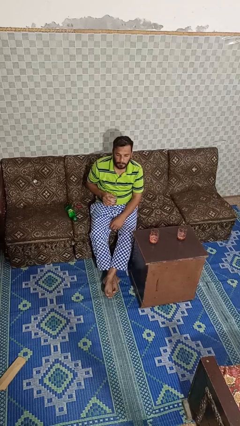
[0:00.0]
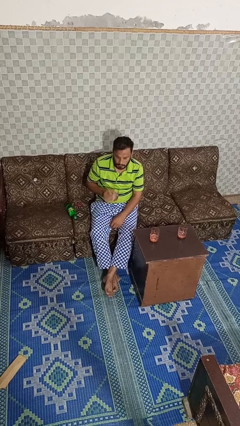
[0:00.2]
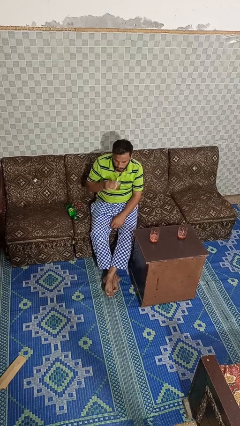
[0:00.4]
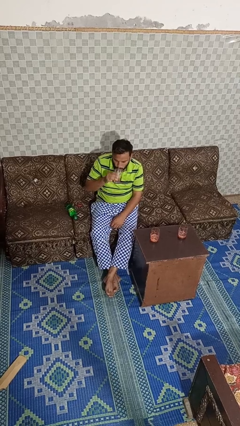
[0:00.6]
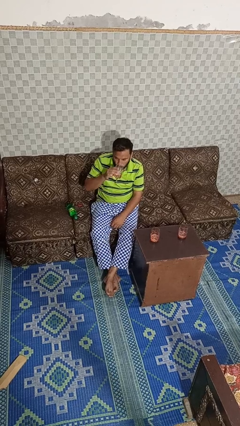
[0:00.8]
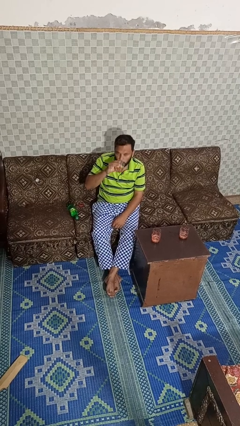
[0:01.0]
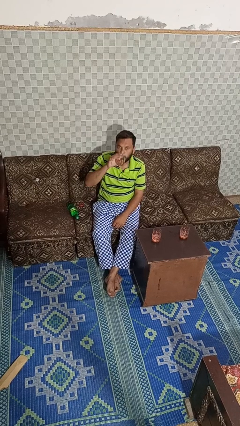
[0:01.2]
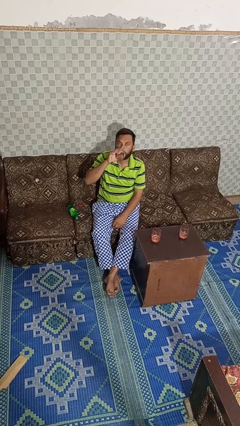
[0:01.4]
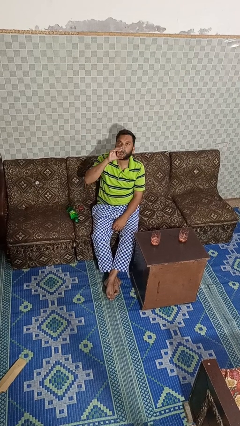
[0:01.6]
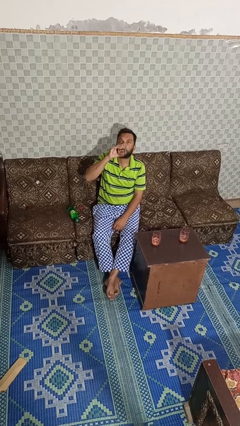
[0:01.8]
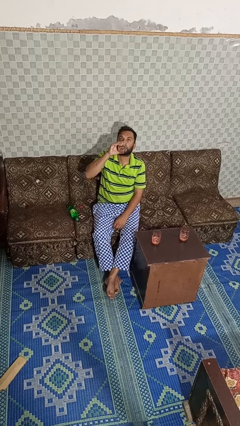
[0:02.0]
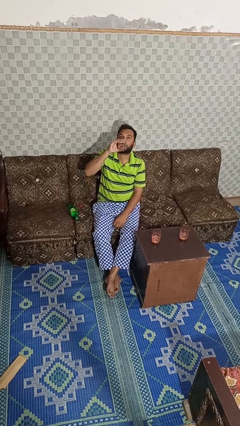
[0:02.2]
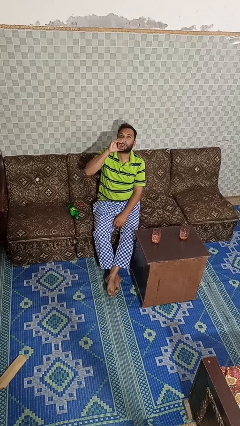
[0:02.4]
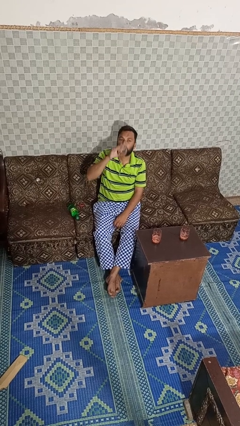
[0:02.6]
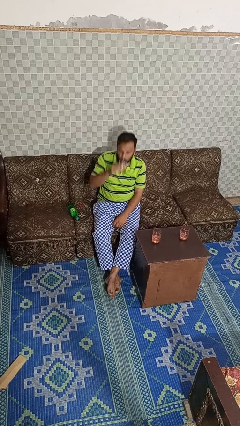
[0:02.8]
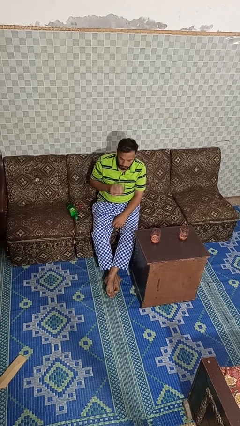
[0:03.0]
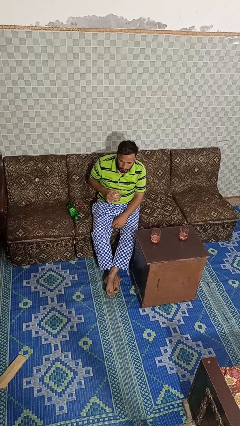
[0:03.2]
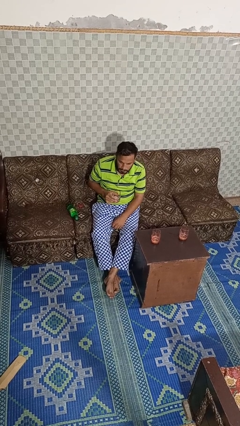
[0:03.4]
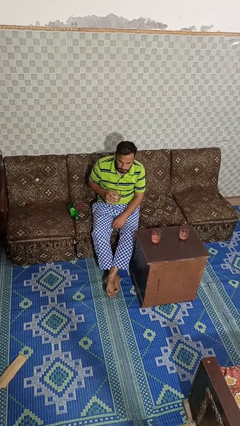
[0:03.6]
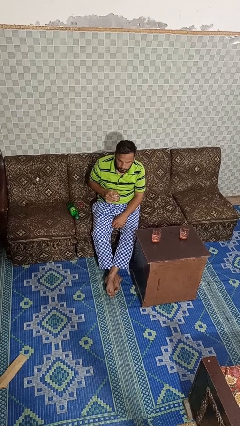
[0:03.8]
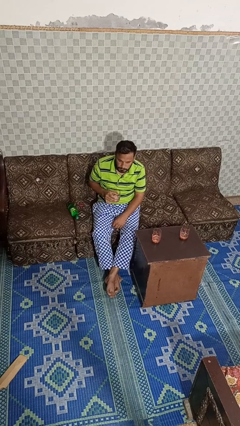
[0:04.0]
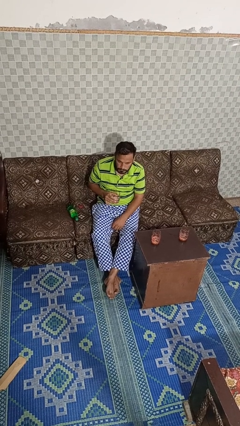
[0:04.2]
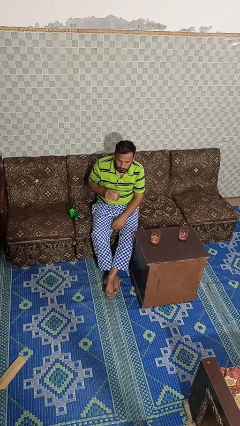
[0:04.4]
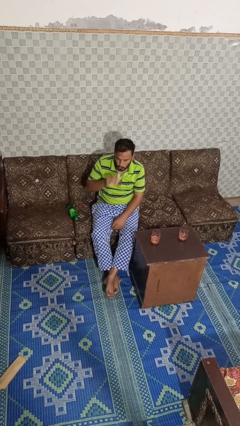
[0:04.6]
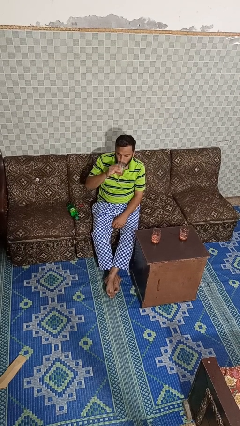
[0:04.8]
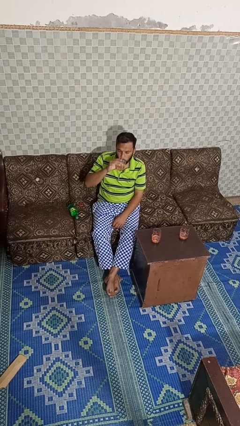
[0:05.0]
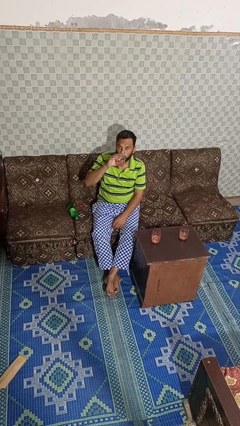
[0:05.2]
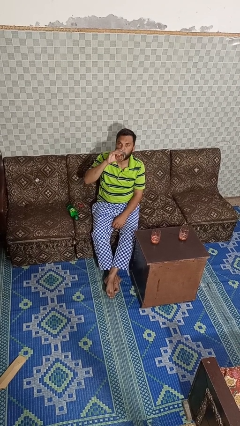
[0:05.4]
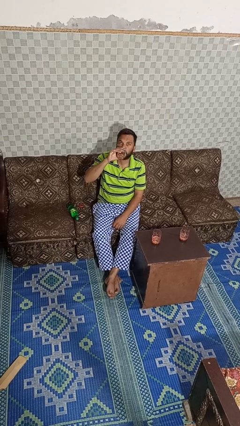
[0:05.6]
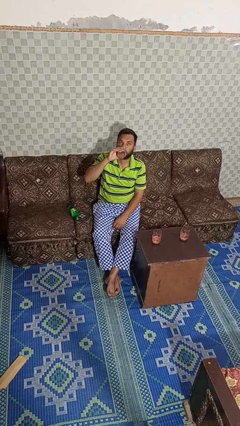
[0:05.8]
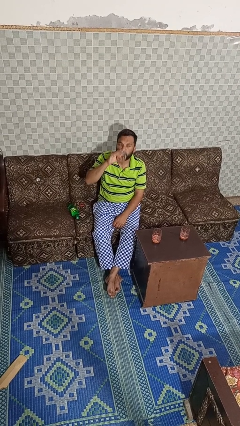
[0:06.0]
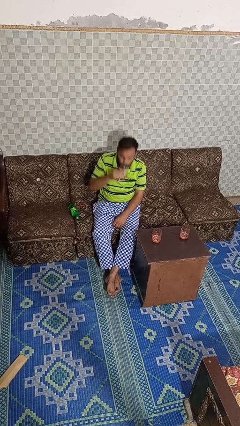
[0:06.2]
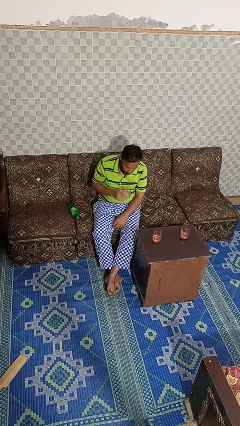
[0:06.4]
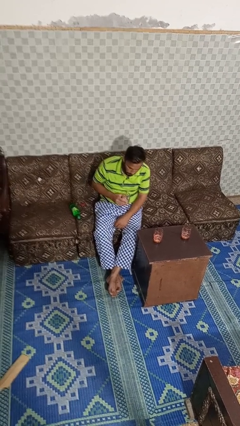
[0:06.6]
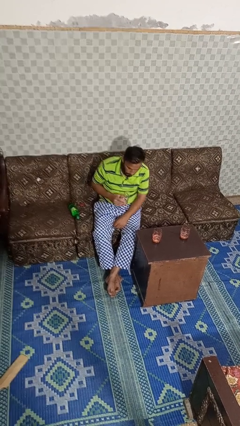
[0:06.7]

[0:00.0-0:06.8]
person drinks from shotglass

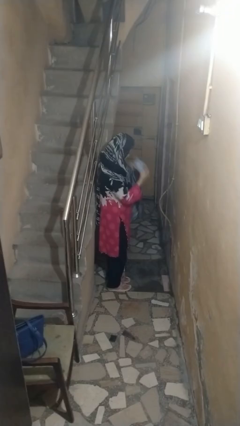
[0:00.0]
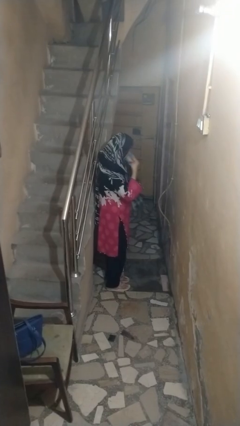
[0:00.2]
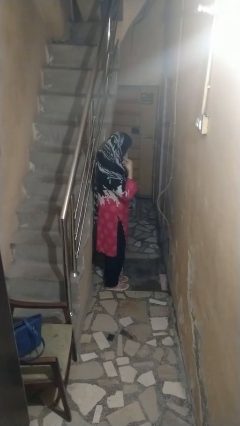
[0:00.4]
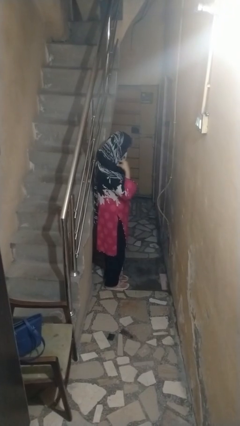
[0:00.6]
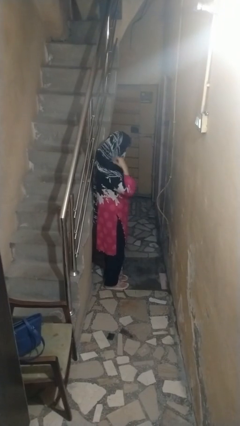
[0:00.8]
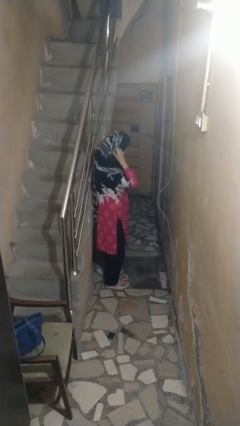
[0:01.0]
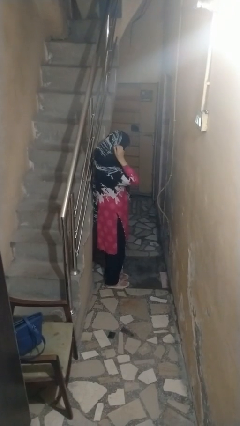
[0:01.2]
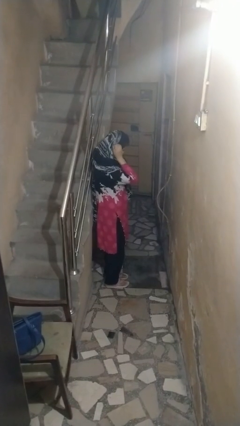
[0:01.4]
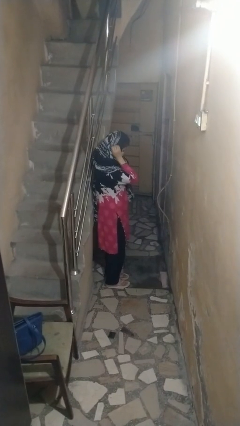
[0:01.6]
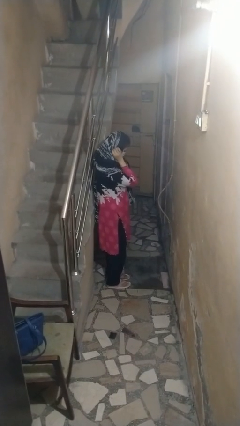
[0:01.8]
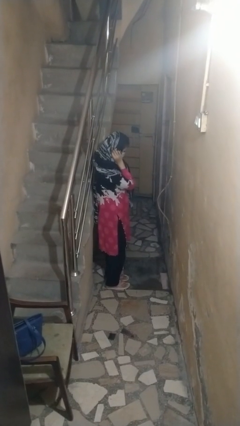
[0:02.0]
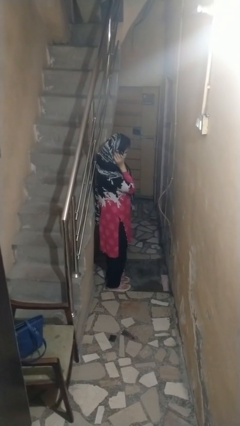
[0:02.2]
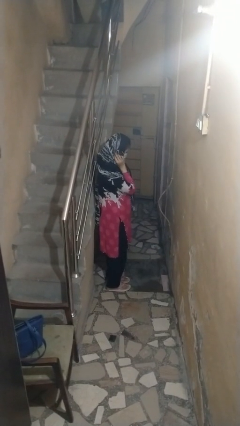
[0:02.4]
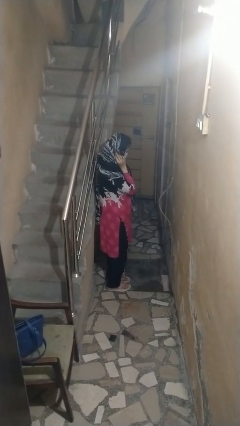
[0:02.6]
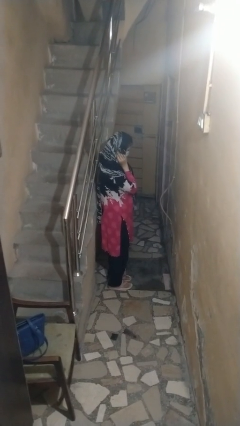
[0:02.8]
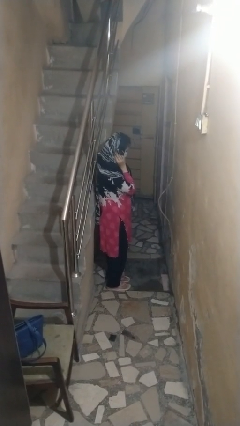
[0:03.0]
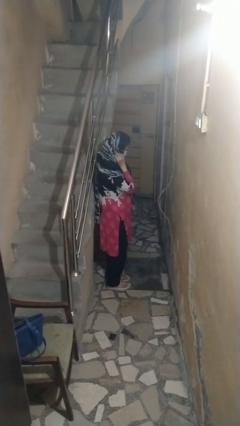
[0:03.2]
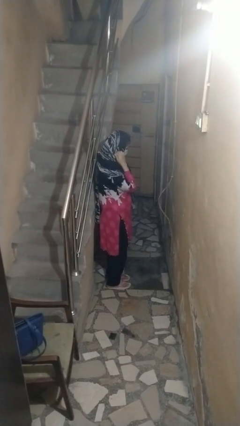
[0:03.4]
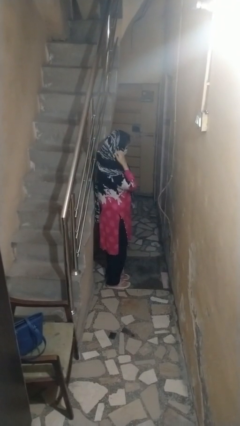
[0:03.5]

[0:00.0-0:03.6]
person puts on facemask

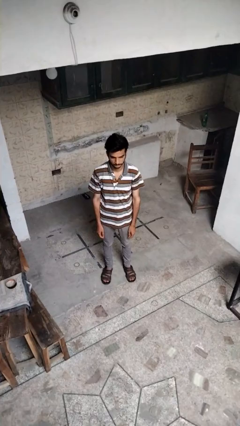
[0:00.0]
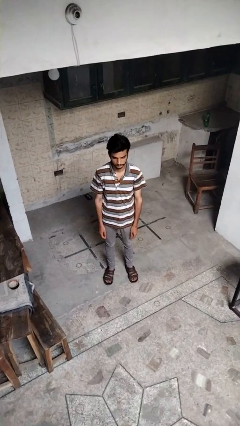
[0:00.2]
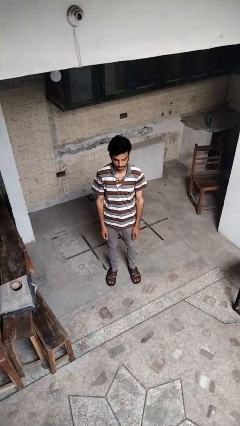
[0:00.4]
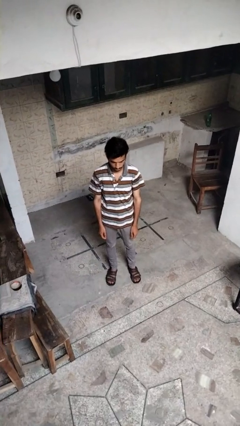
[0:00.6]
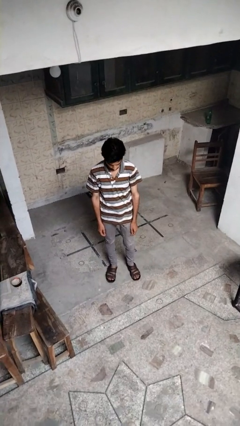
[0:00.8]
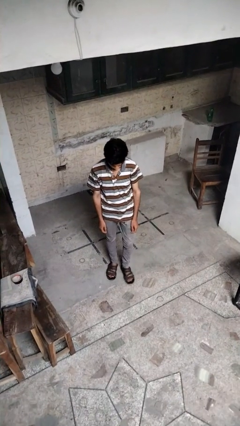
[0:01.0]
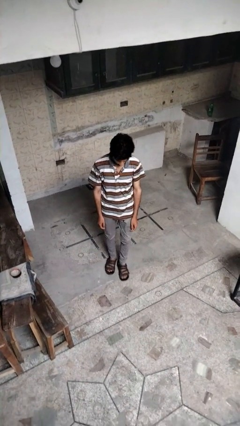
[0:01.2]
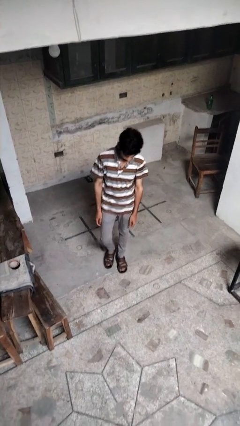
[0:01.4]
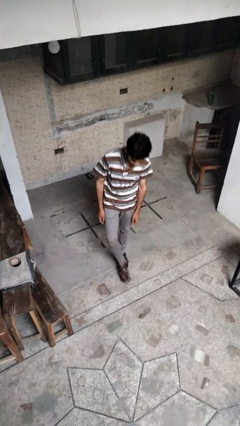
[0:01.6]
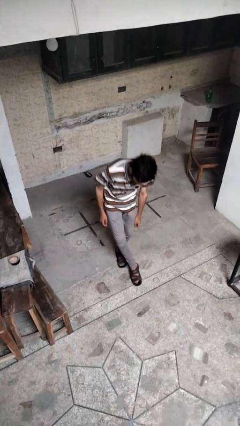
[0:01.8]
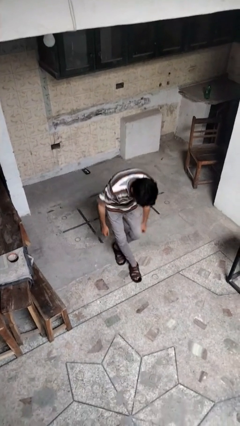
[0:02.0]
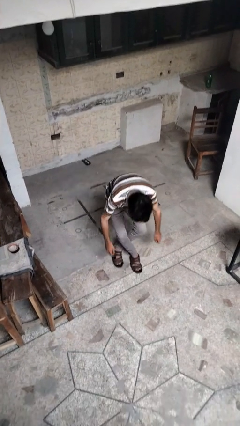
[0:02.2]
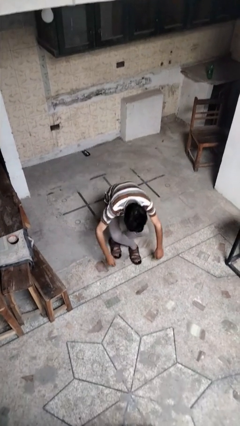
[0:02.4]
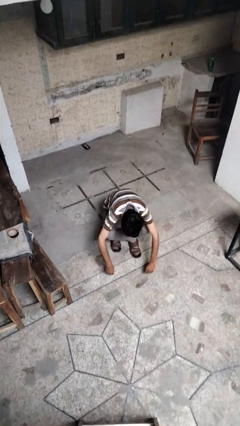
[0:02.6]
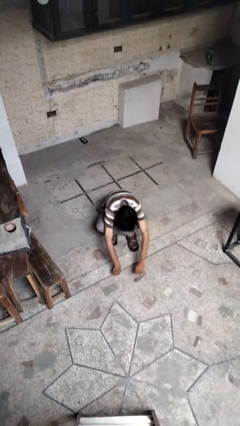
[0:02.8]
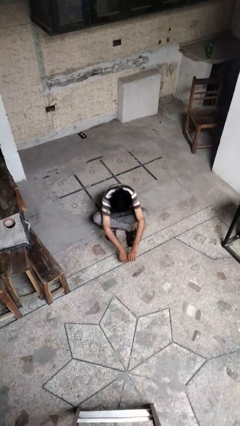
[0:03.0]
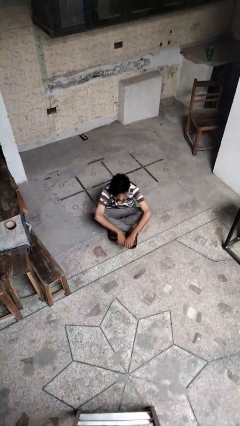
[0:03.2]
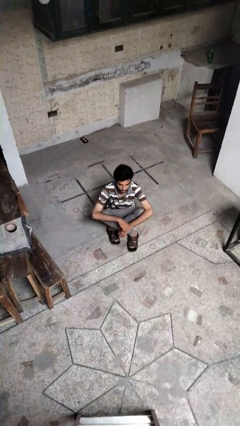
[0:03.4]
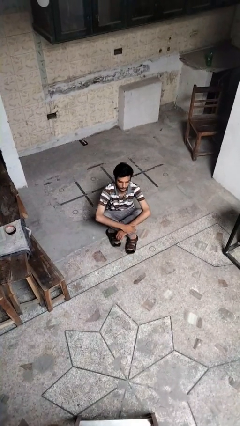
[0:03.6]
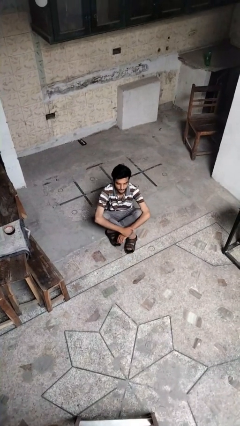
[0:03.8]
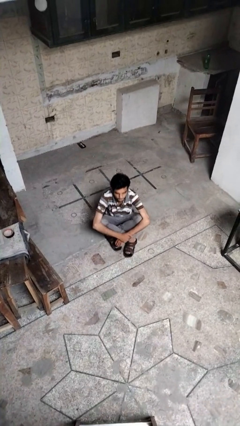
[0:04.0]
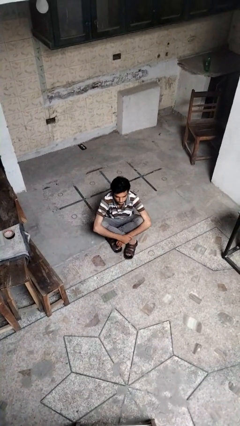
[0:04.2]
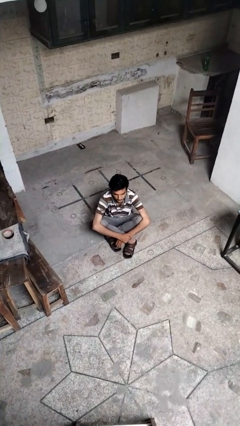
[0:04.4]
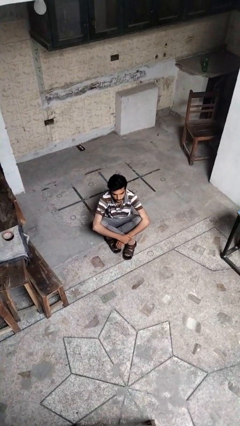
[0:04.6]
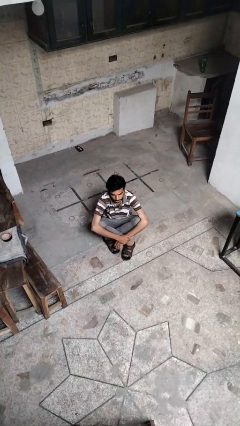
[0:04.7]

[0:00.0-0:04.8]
person sits crisscross

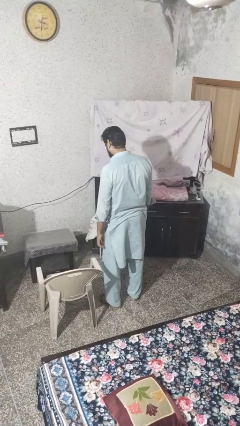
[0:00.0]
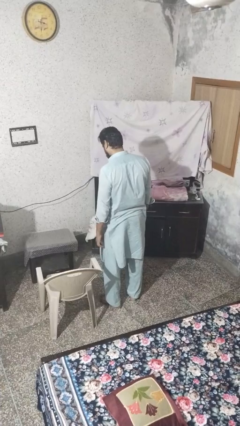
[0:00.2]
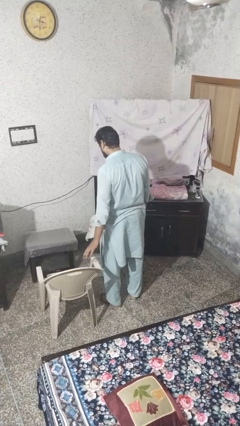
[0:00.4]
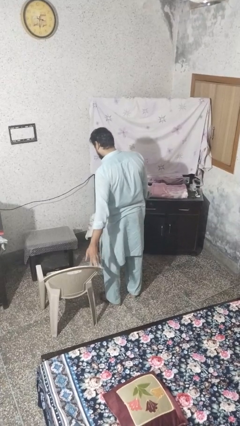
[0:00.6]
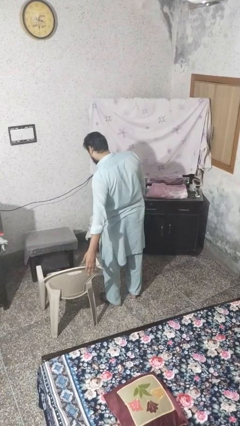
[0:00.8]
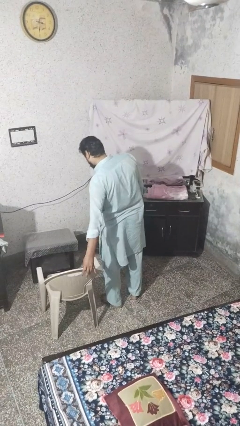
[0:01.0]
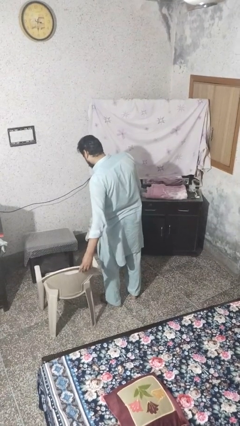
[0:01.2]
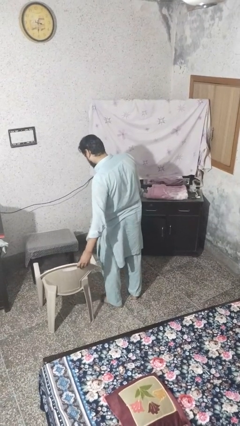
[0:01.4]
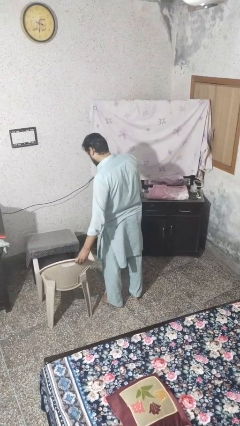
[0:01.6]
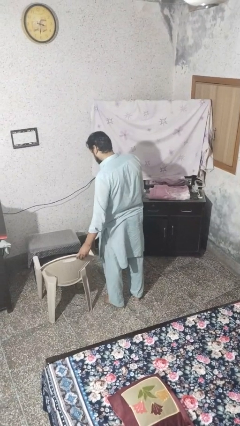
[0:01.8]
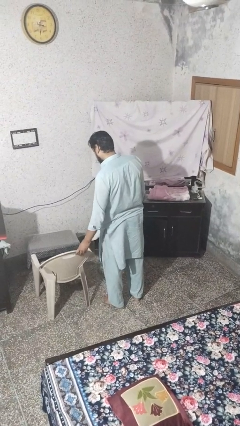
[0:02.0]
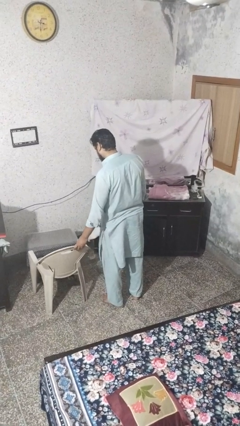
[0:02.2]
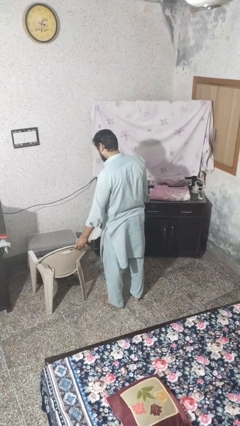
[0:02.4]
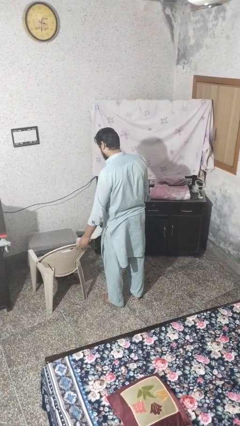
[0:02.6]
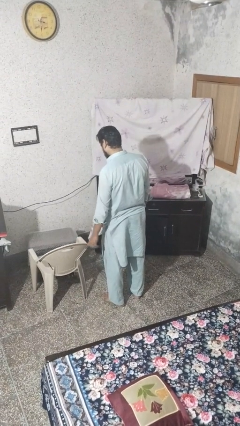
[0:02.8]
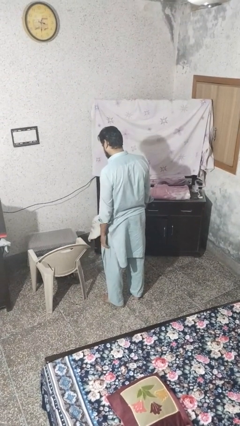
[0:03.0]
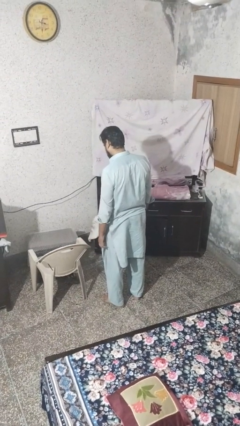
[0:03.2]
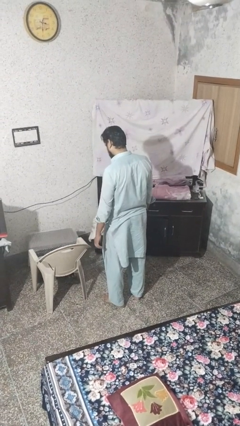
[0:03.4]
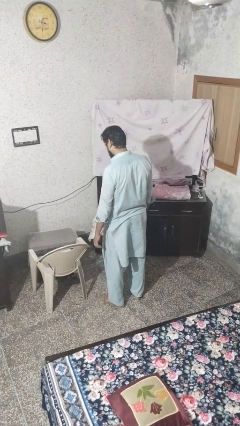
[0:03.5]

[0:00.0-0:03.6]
person pushes in chair
